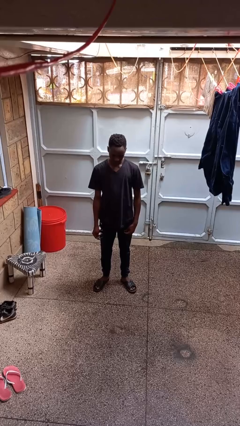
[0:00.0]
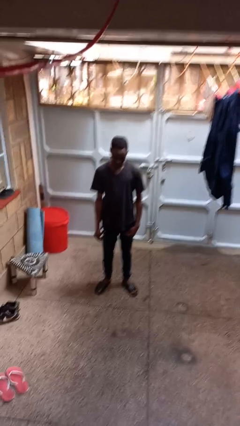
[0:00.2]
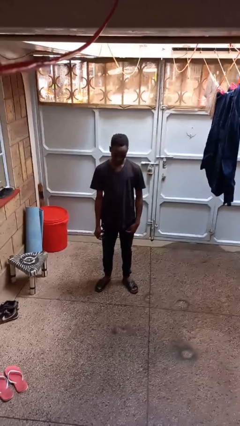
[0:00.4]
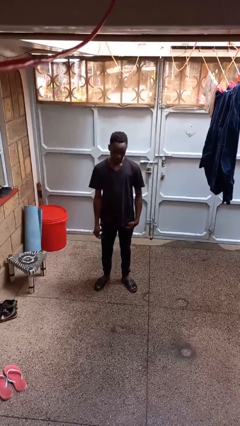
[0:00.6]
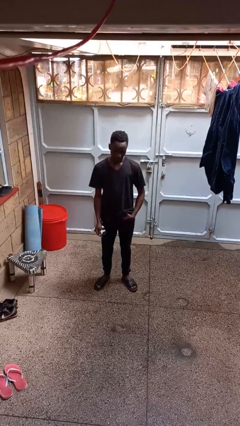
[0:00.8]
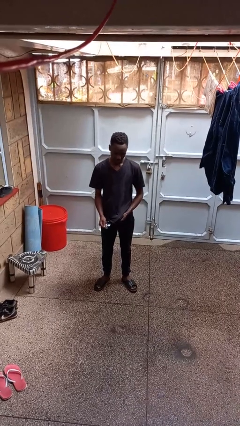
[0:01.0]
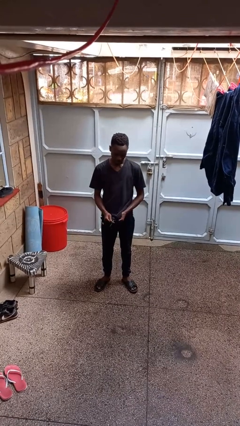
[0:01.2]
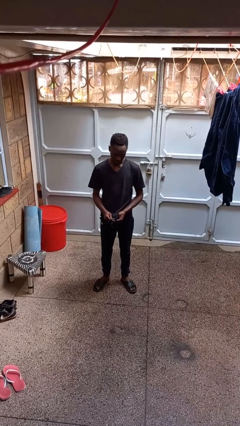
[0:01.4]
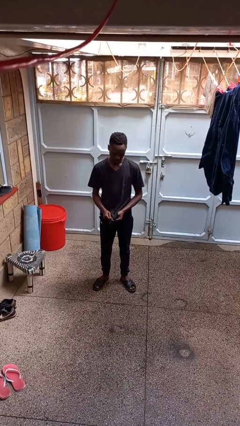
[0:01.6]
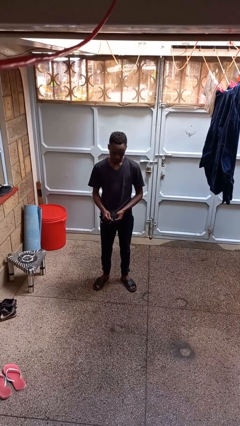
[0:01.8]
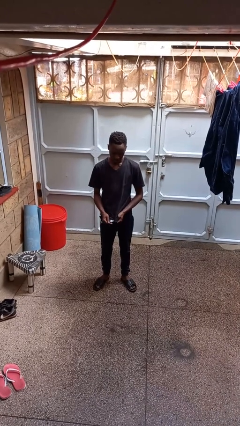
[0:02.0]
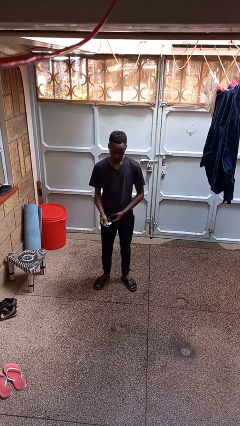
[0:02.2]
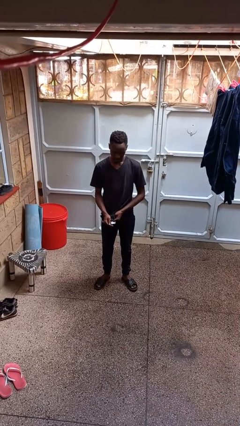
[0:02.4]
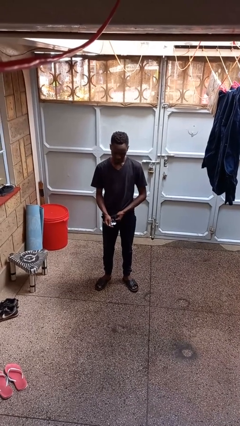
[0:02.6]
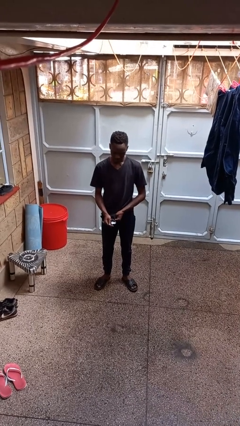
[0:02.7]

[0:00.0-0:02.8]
person cleans eyeglasses

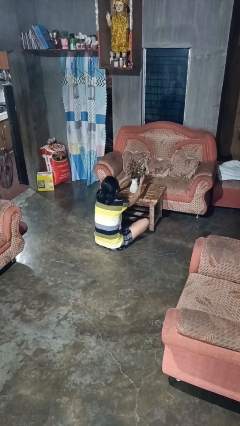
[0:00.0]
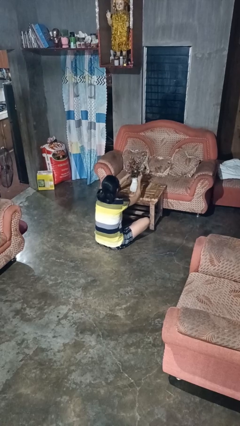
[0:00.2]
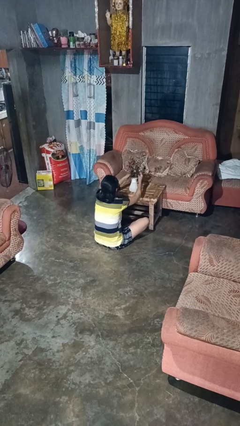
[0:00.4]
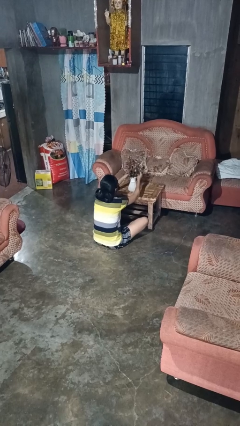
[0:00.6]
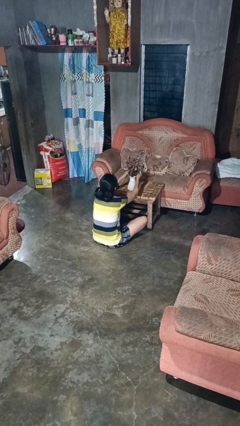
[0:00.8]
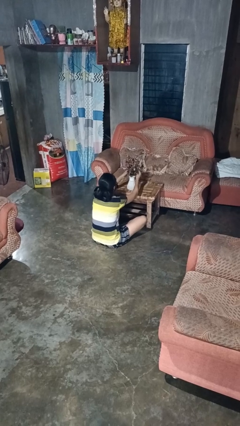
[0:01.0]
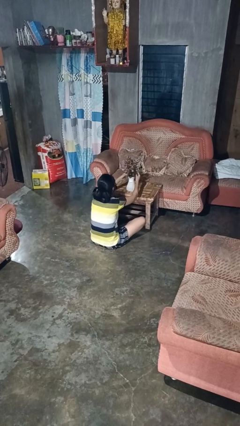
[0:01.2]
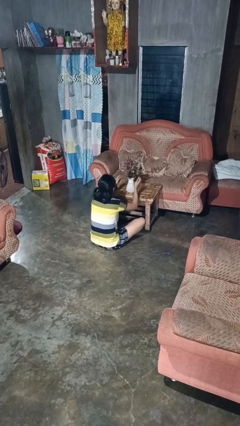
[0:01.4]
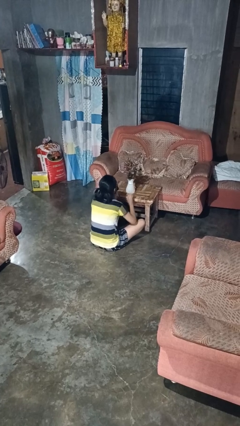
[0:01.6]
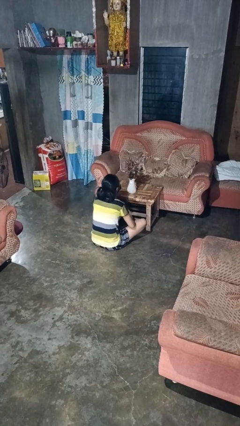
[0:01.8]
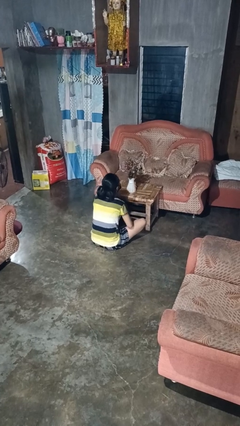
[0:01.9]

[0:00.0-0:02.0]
person arranges flowers in vase

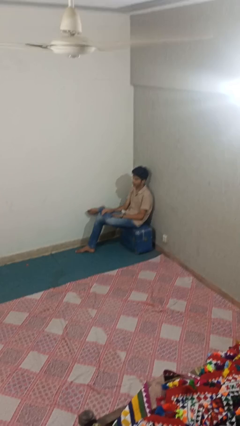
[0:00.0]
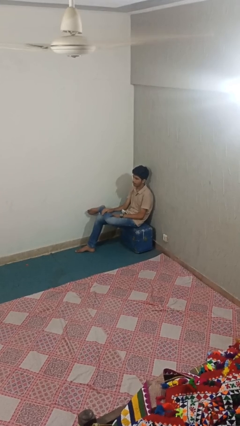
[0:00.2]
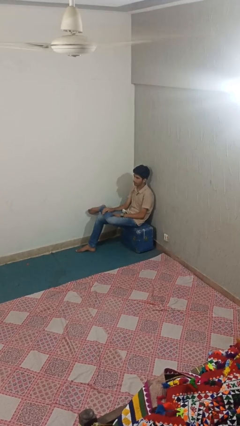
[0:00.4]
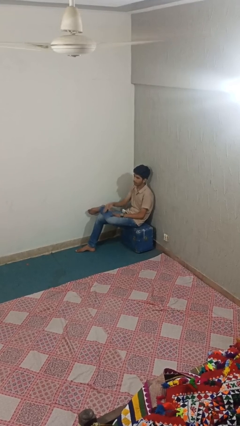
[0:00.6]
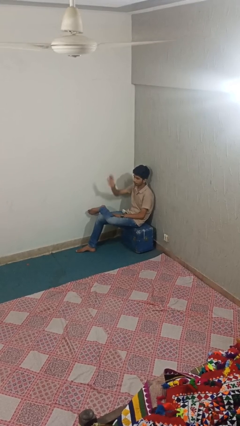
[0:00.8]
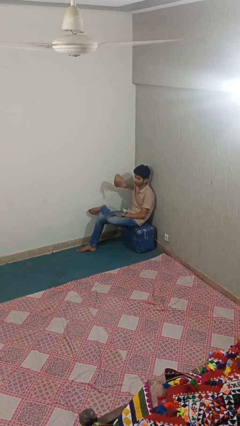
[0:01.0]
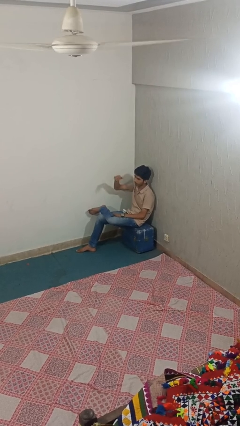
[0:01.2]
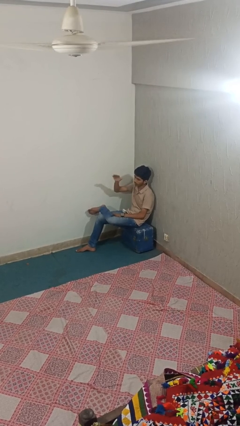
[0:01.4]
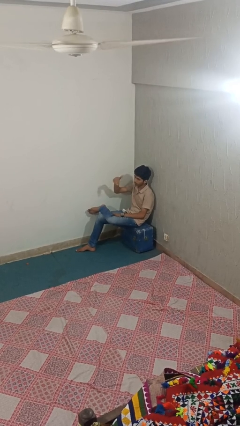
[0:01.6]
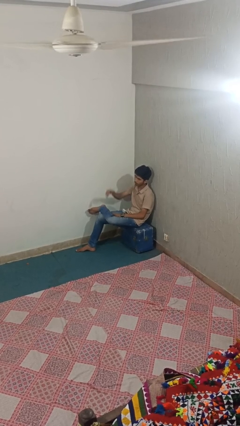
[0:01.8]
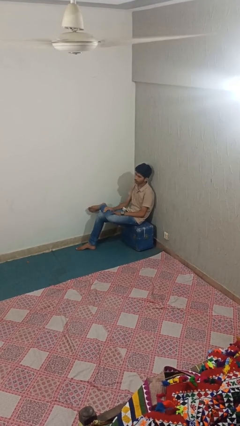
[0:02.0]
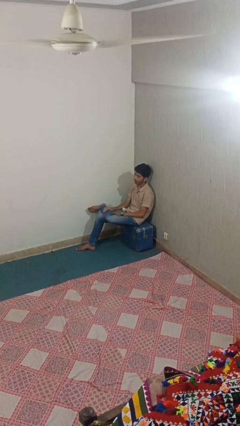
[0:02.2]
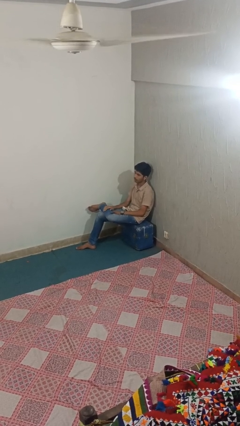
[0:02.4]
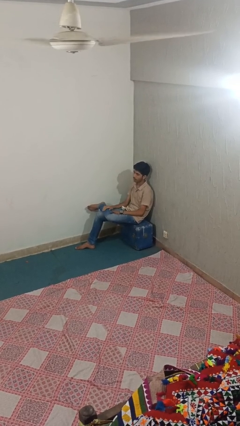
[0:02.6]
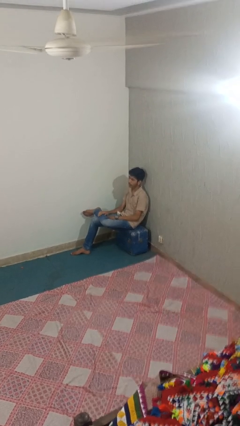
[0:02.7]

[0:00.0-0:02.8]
person gestures come here

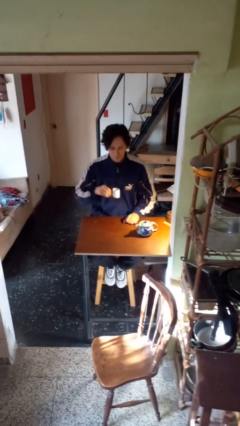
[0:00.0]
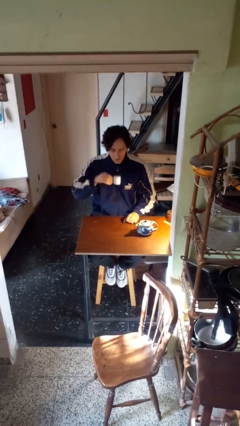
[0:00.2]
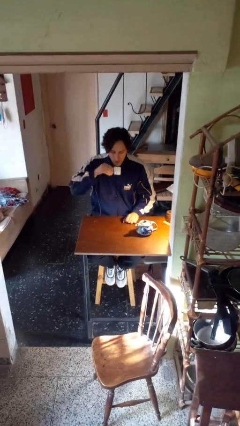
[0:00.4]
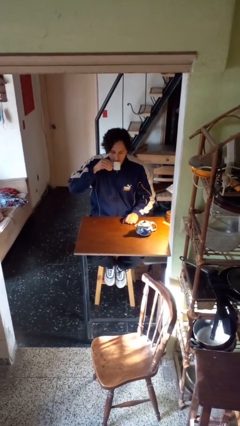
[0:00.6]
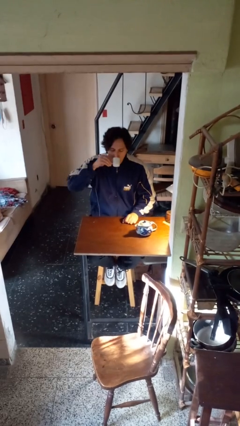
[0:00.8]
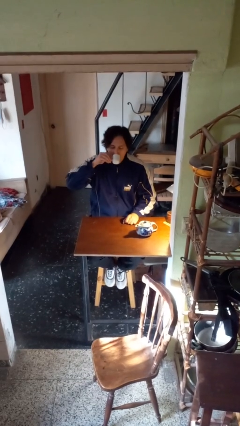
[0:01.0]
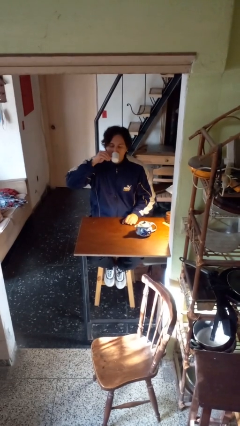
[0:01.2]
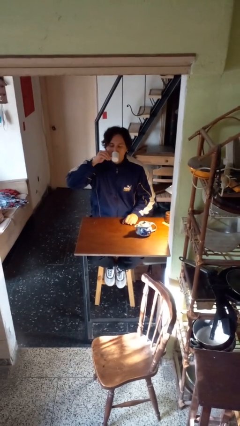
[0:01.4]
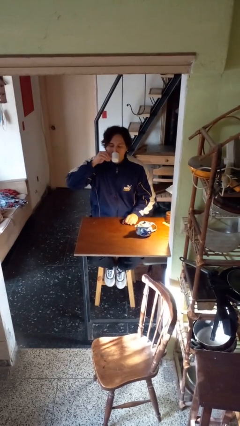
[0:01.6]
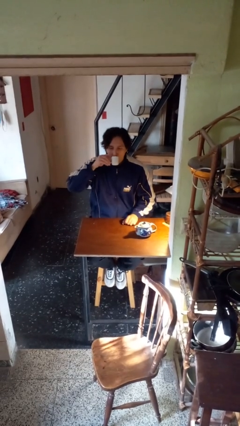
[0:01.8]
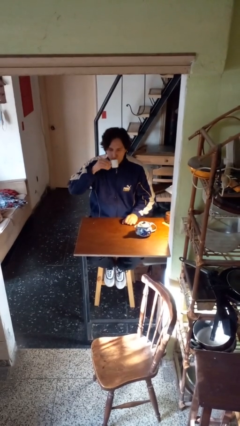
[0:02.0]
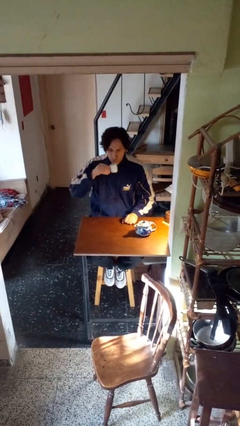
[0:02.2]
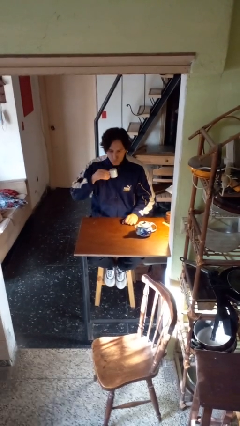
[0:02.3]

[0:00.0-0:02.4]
person drinks from mug

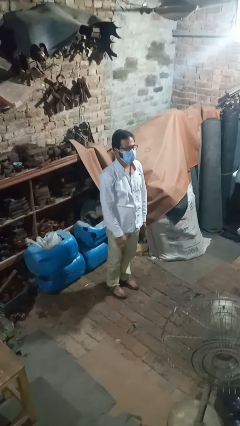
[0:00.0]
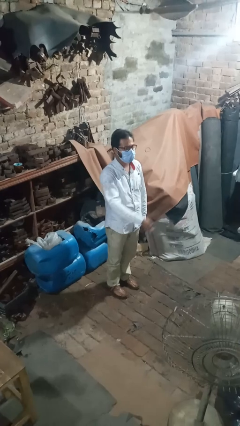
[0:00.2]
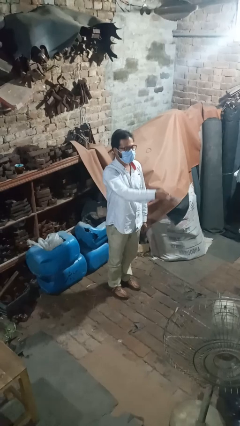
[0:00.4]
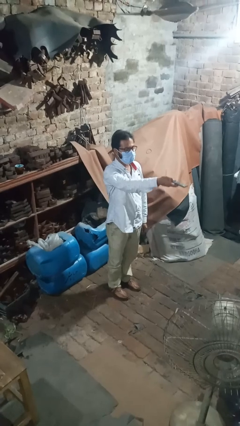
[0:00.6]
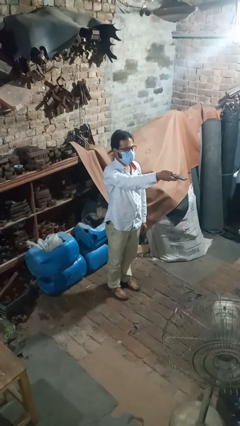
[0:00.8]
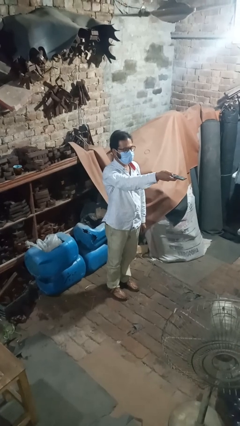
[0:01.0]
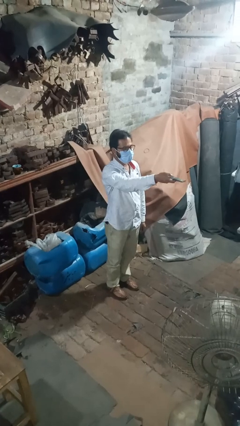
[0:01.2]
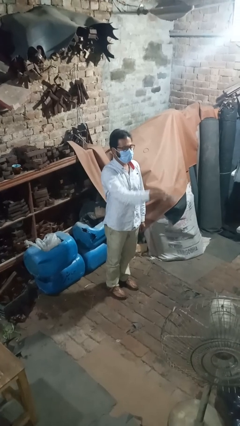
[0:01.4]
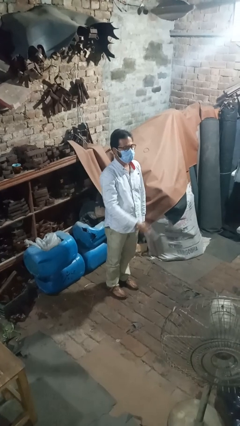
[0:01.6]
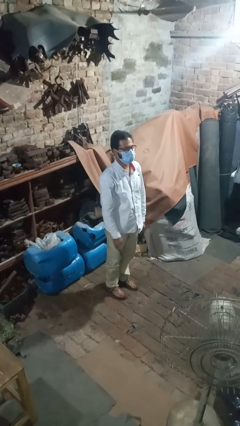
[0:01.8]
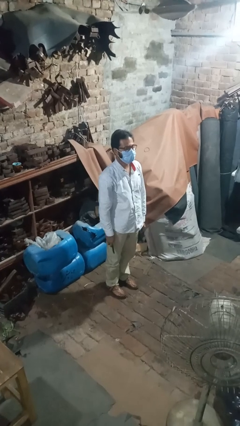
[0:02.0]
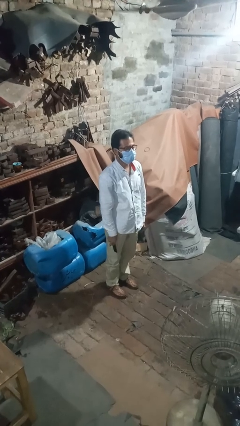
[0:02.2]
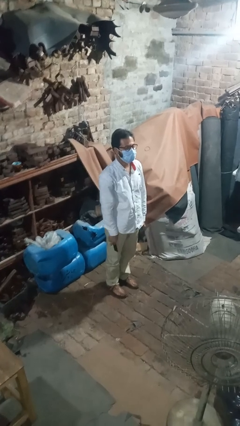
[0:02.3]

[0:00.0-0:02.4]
person uses television remote

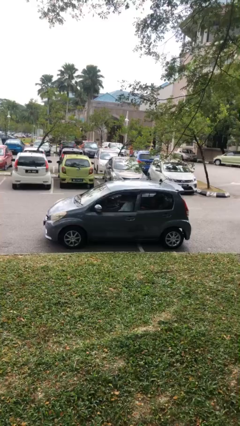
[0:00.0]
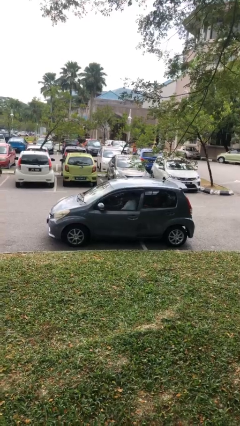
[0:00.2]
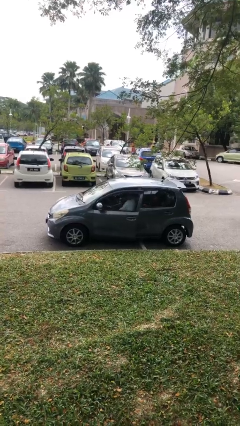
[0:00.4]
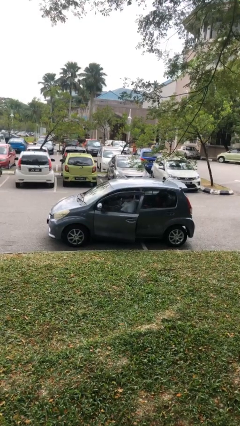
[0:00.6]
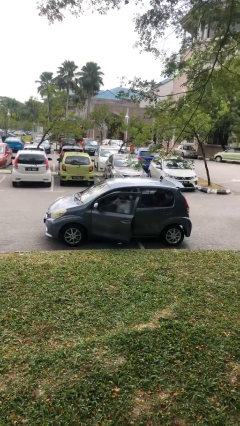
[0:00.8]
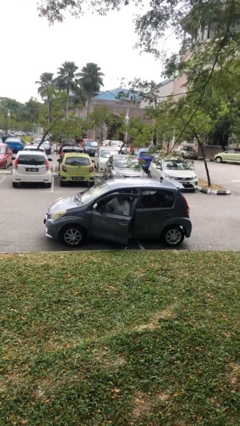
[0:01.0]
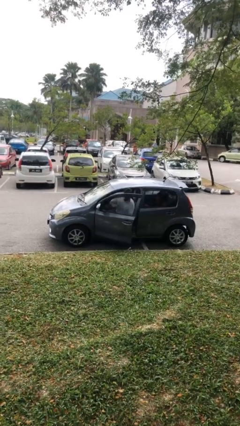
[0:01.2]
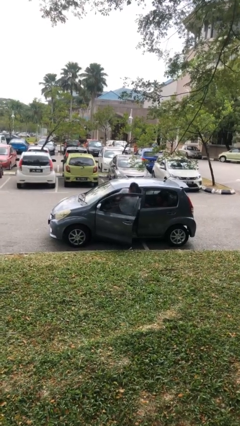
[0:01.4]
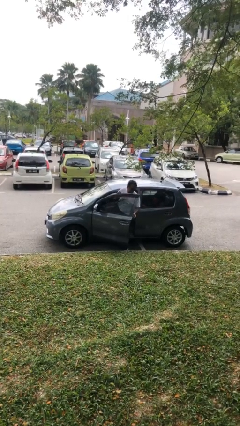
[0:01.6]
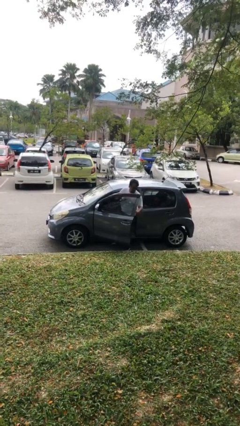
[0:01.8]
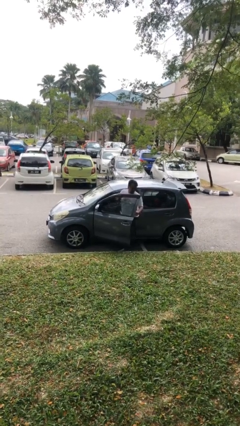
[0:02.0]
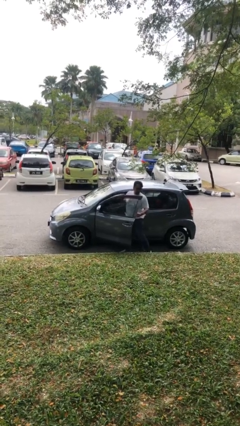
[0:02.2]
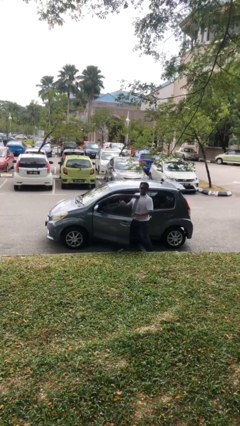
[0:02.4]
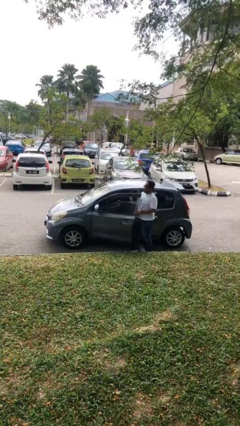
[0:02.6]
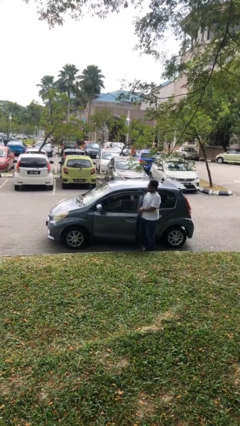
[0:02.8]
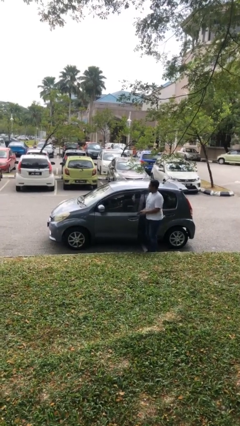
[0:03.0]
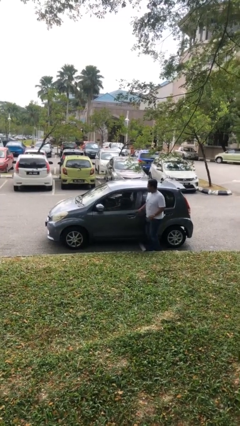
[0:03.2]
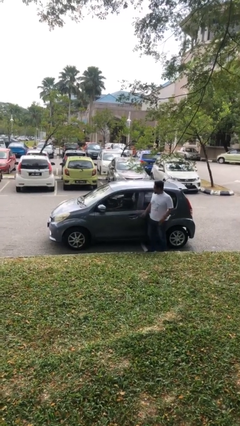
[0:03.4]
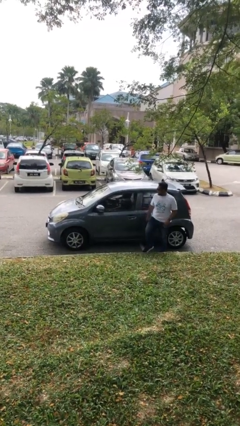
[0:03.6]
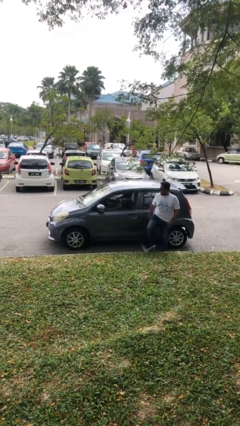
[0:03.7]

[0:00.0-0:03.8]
car drops off person

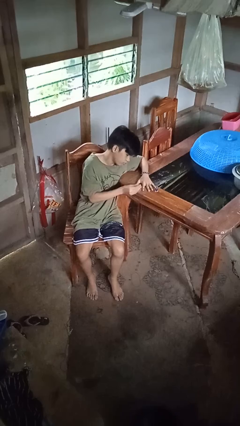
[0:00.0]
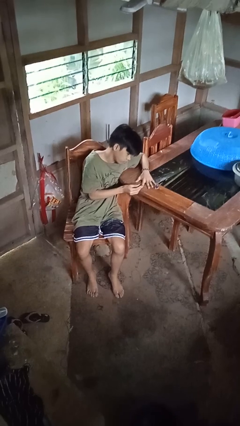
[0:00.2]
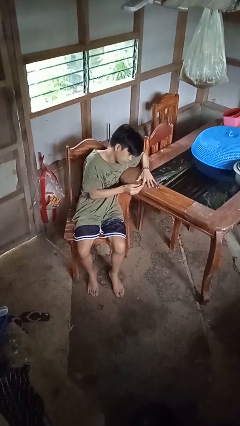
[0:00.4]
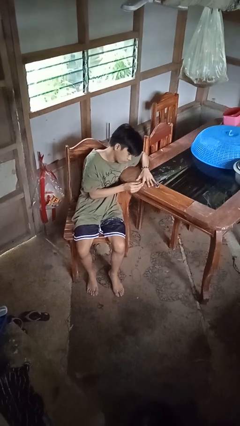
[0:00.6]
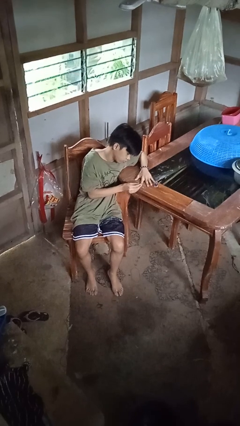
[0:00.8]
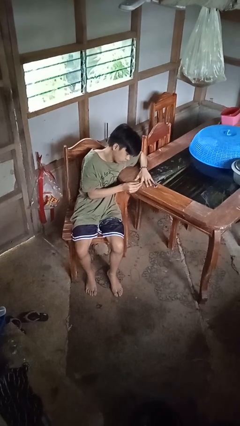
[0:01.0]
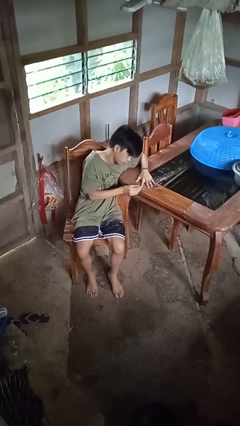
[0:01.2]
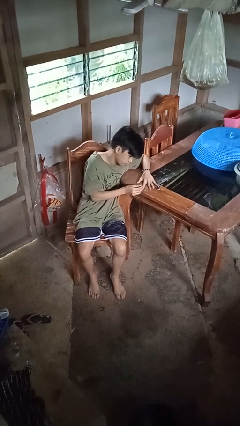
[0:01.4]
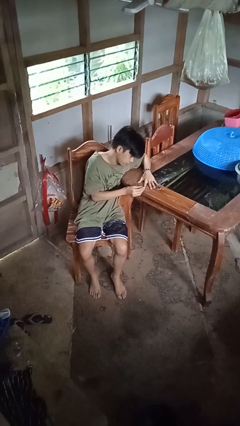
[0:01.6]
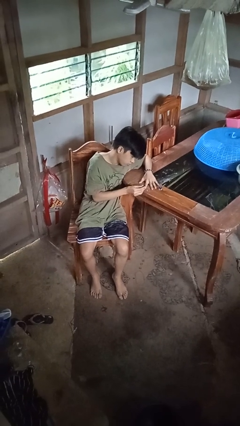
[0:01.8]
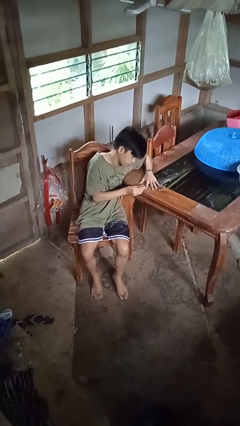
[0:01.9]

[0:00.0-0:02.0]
person paints fingernails
